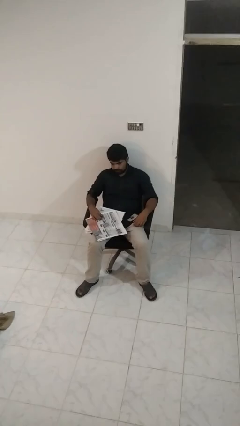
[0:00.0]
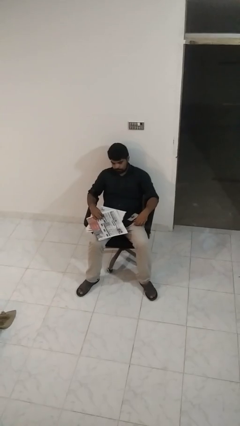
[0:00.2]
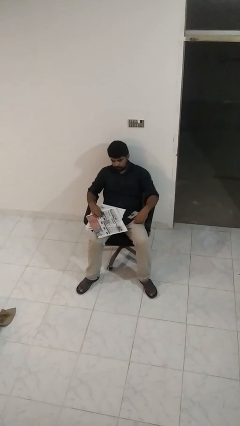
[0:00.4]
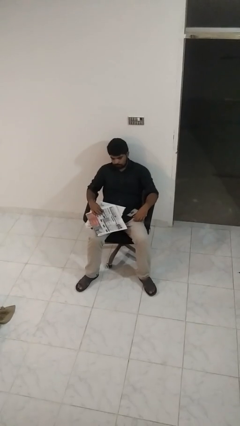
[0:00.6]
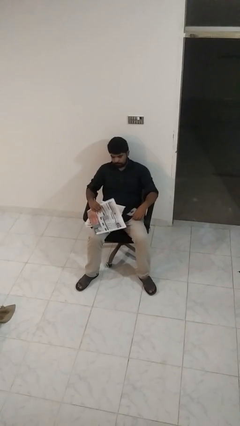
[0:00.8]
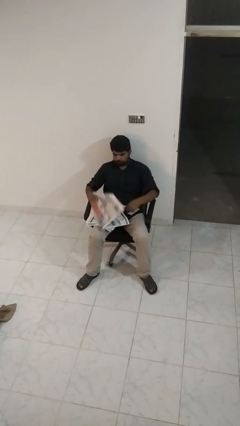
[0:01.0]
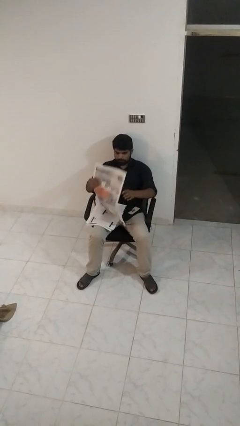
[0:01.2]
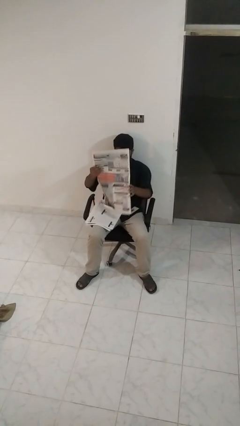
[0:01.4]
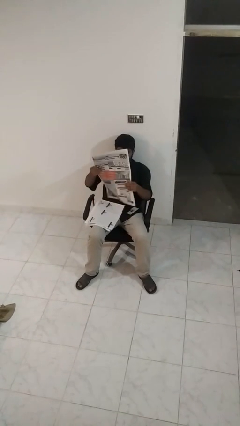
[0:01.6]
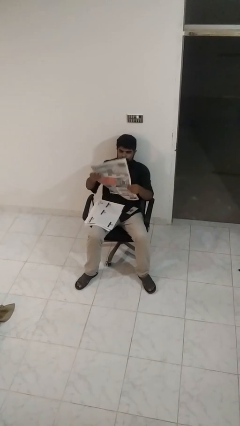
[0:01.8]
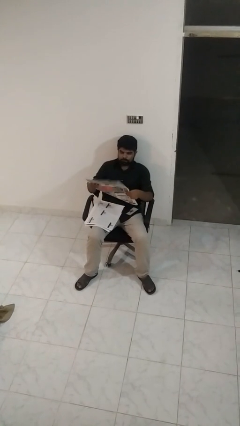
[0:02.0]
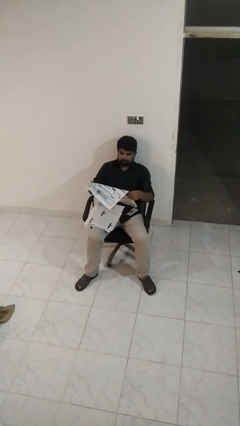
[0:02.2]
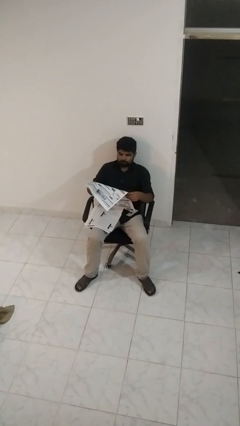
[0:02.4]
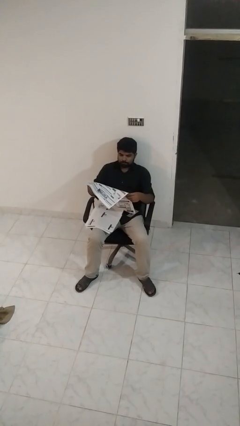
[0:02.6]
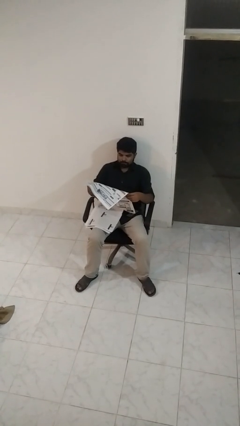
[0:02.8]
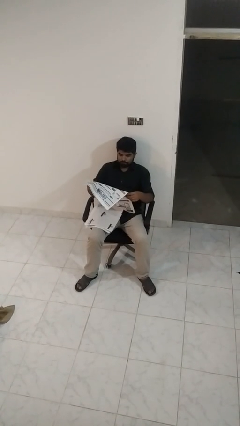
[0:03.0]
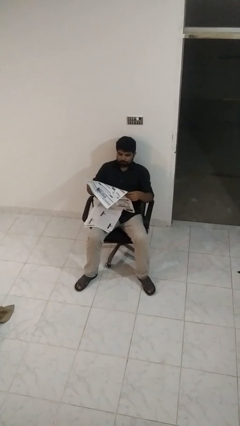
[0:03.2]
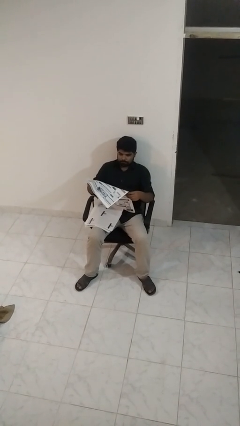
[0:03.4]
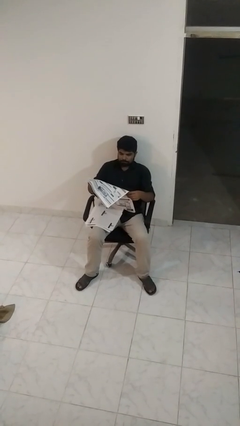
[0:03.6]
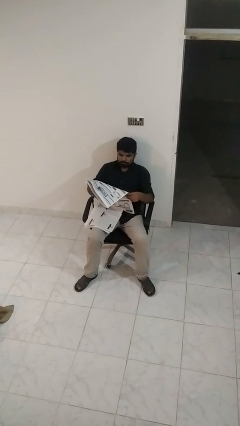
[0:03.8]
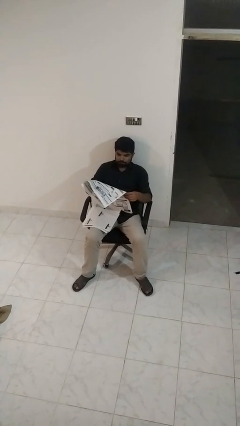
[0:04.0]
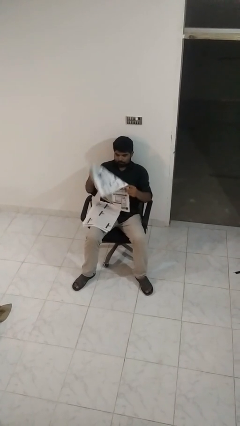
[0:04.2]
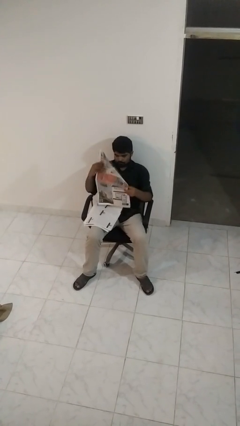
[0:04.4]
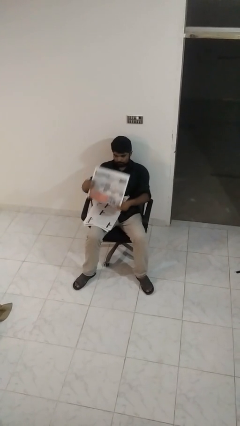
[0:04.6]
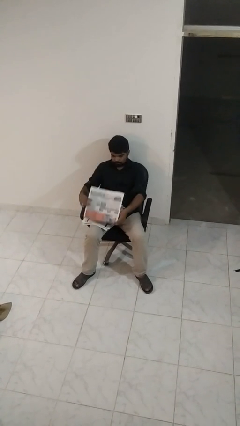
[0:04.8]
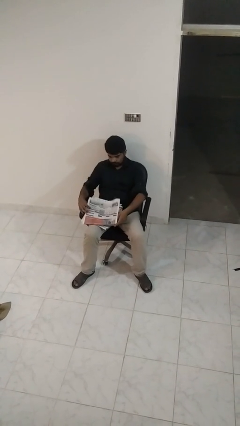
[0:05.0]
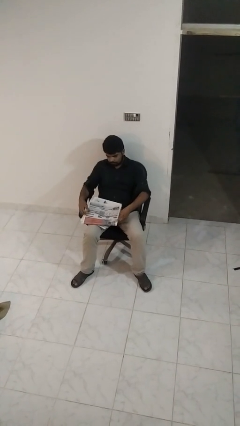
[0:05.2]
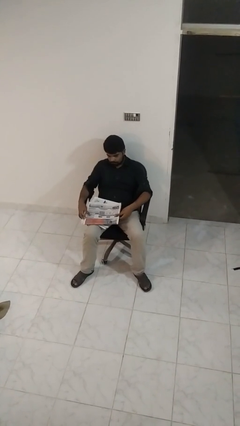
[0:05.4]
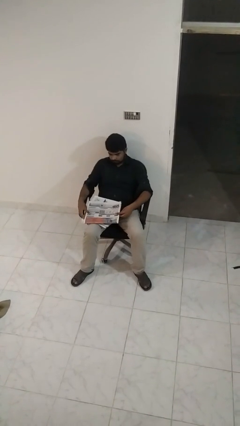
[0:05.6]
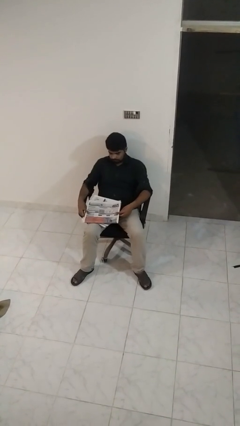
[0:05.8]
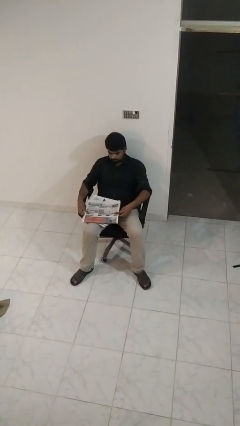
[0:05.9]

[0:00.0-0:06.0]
person reads newspaper

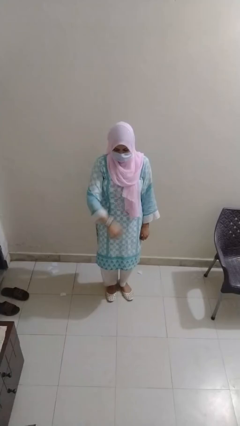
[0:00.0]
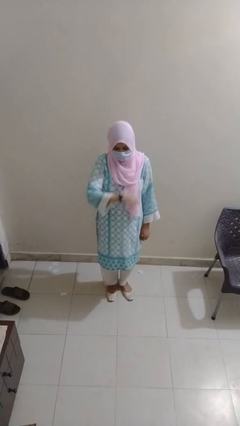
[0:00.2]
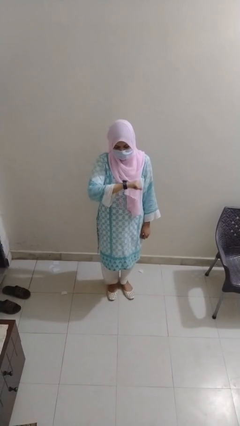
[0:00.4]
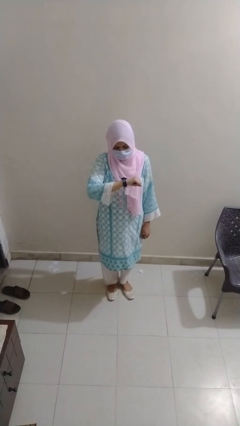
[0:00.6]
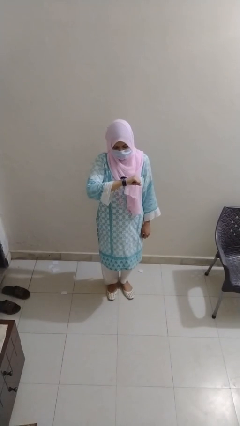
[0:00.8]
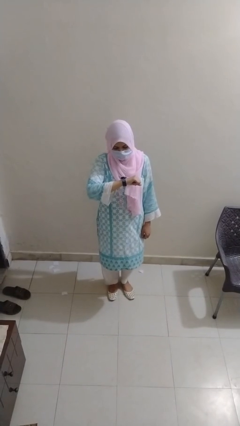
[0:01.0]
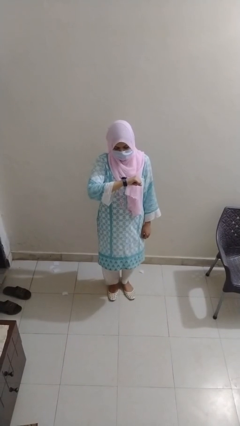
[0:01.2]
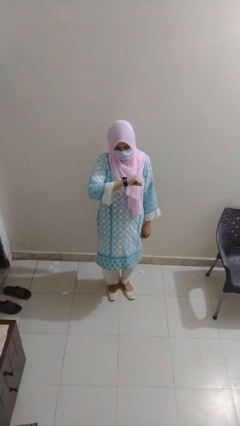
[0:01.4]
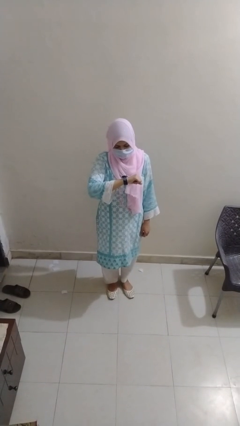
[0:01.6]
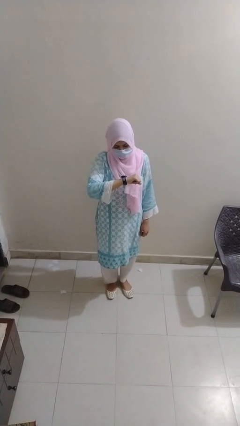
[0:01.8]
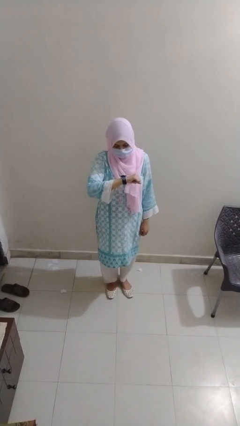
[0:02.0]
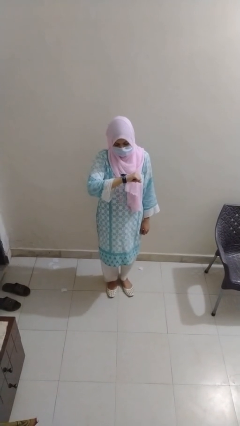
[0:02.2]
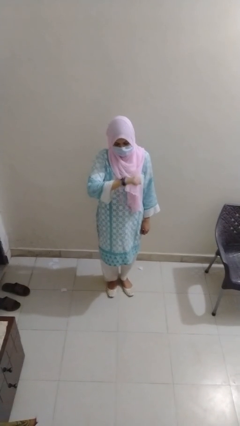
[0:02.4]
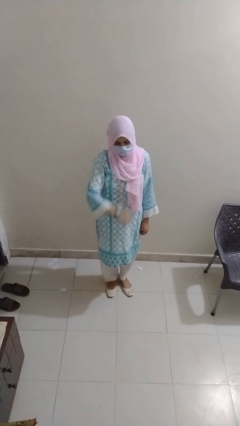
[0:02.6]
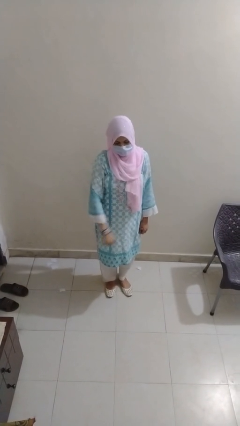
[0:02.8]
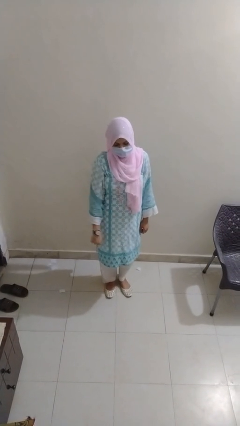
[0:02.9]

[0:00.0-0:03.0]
person looks at wristwatch

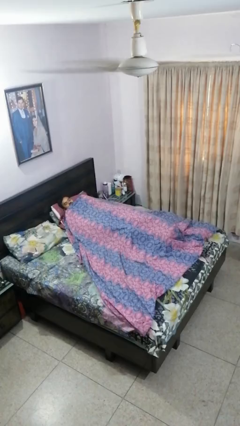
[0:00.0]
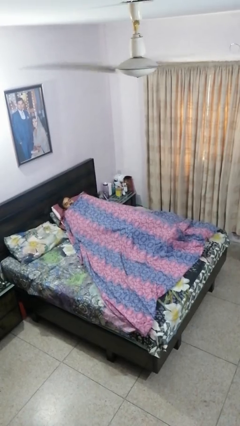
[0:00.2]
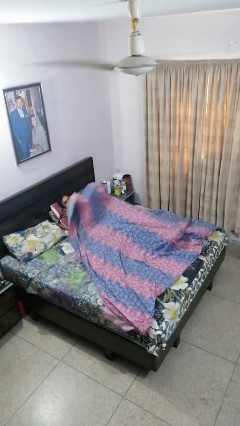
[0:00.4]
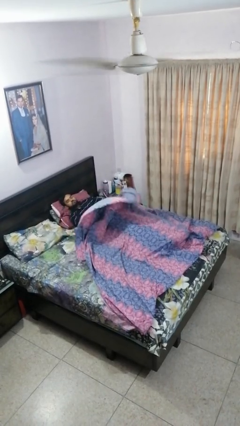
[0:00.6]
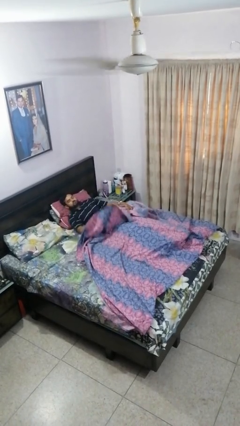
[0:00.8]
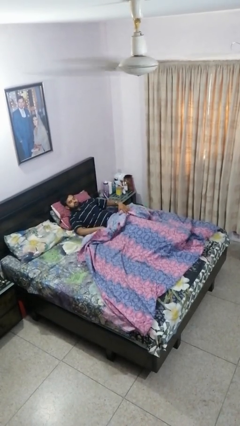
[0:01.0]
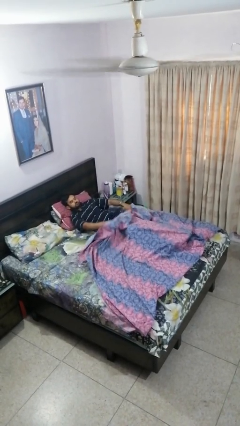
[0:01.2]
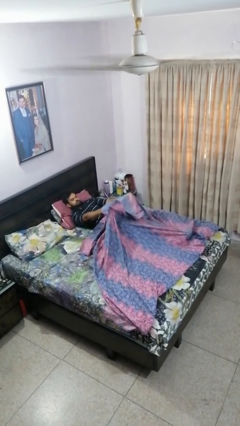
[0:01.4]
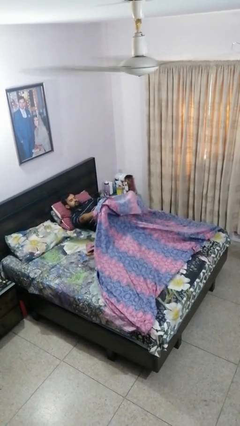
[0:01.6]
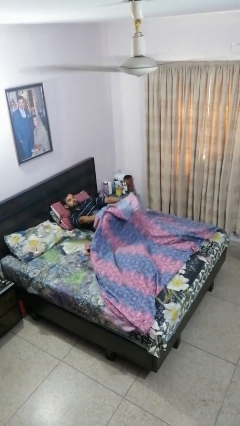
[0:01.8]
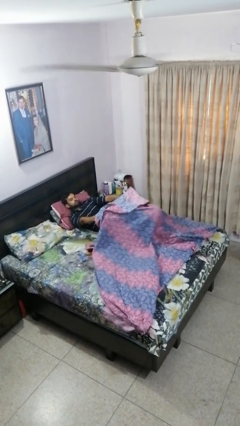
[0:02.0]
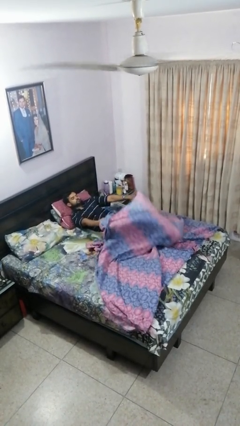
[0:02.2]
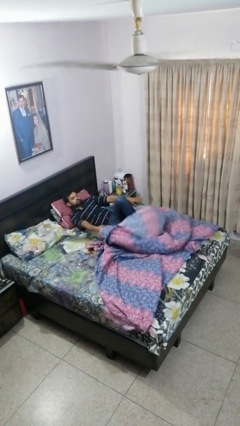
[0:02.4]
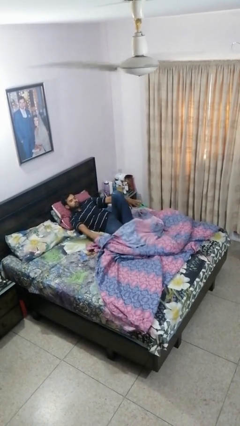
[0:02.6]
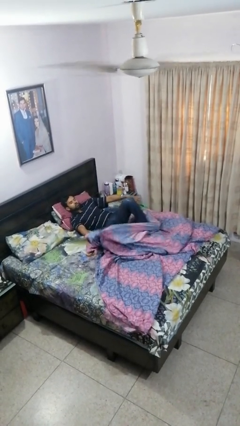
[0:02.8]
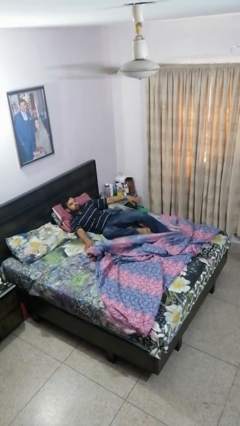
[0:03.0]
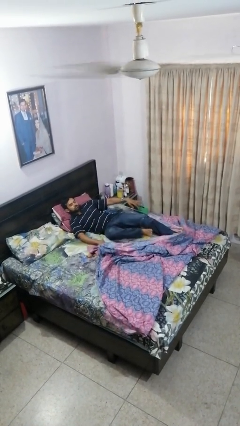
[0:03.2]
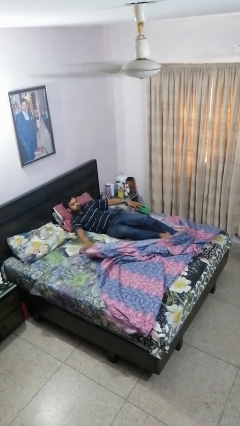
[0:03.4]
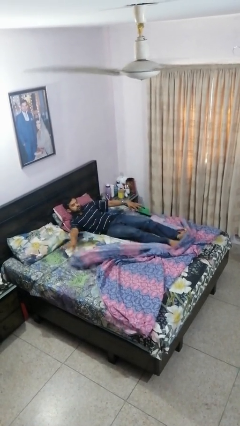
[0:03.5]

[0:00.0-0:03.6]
person uncovers with bedsheets

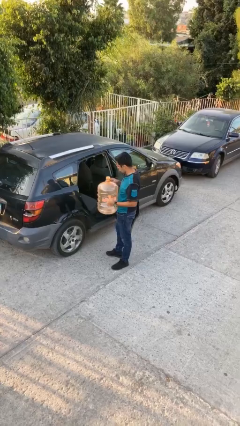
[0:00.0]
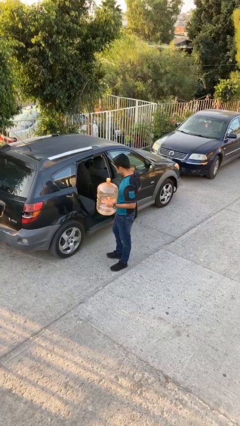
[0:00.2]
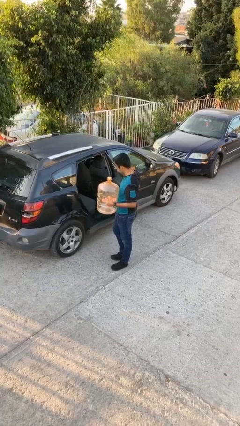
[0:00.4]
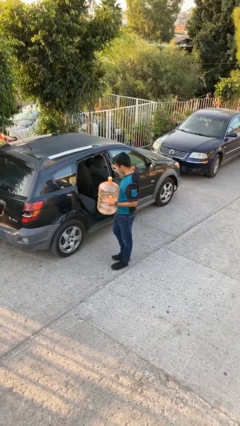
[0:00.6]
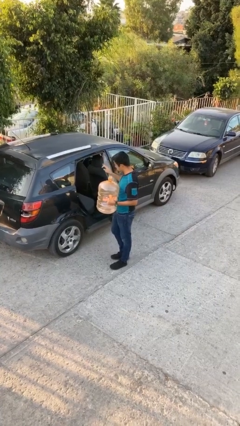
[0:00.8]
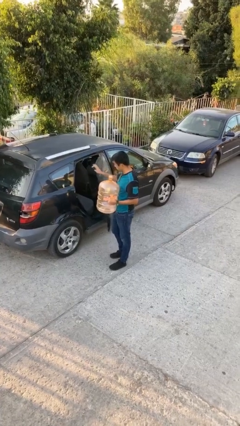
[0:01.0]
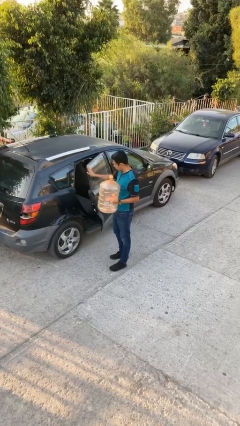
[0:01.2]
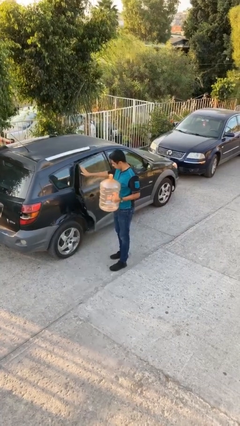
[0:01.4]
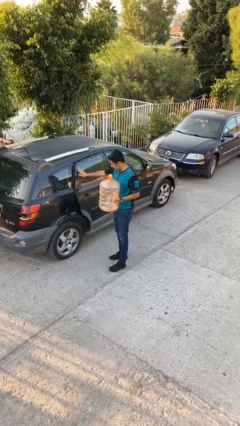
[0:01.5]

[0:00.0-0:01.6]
person closes car door

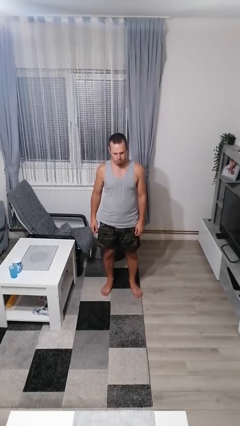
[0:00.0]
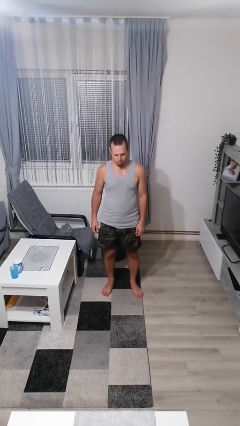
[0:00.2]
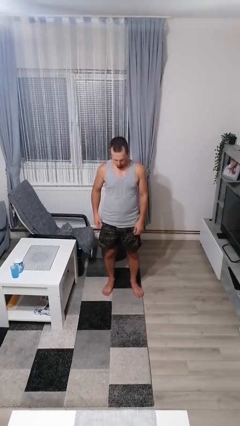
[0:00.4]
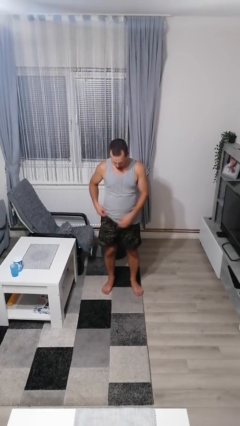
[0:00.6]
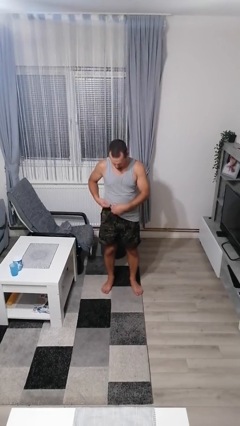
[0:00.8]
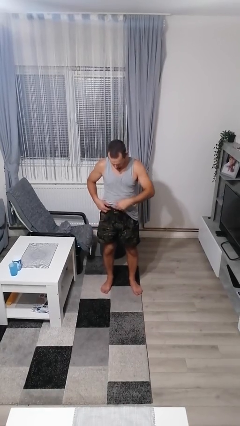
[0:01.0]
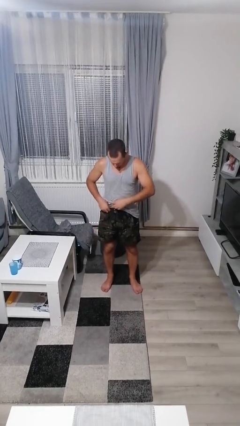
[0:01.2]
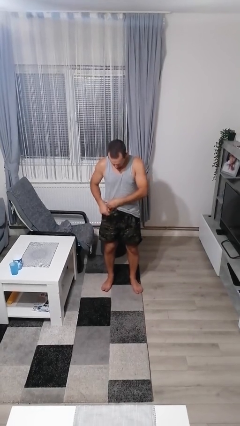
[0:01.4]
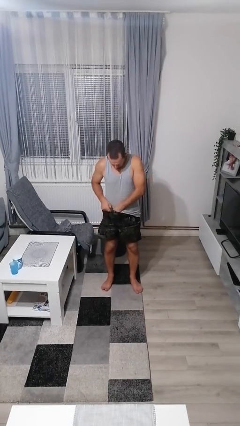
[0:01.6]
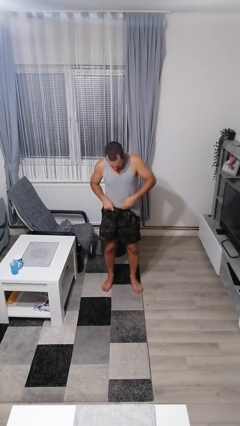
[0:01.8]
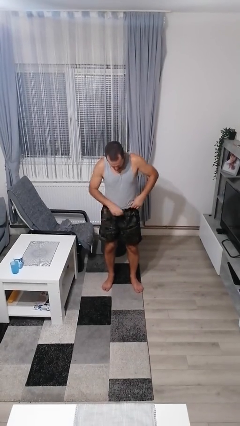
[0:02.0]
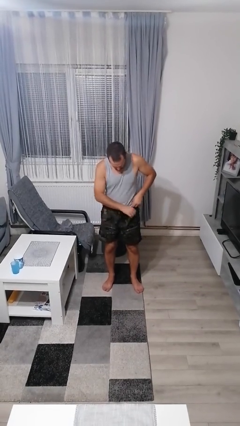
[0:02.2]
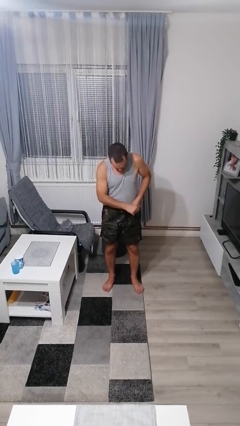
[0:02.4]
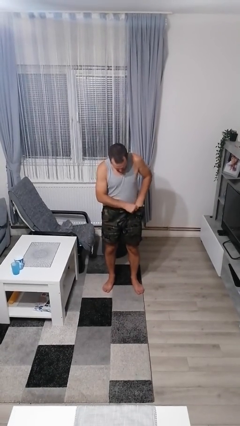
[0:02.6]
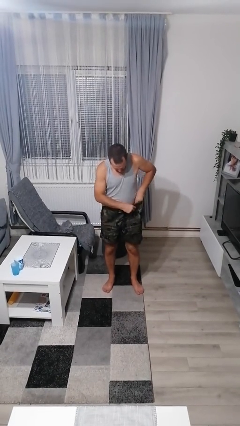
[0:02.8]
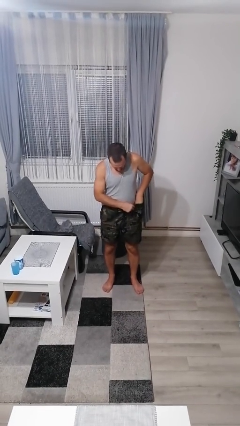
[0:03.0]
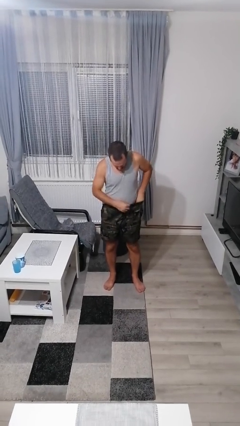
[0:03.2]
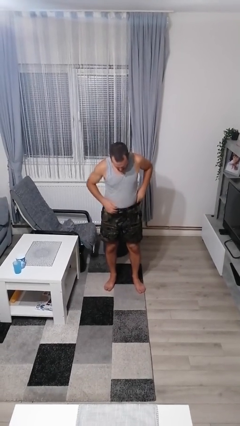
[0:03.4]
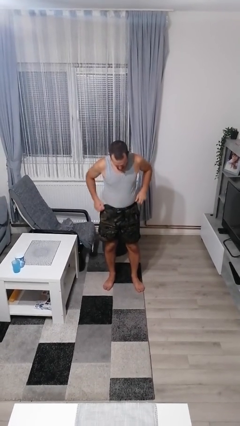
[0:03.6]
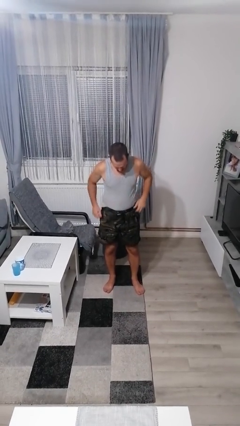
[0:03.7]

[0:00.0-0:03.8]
person tucks in shirt
